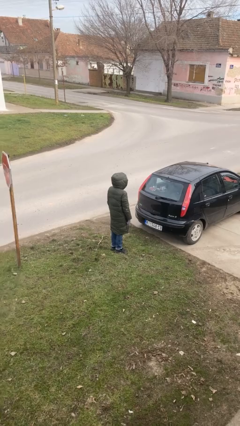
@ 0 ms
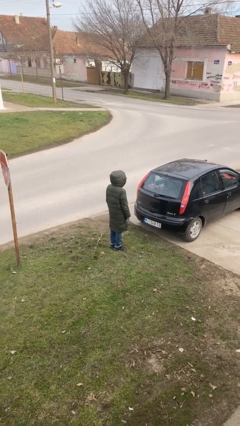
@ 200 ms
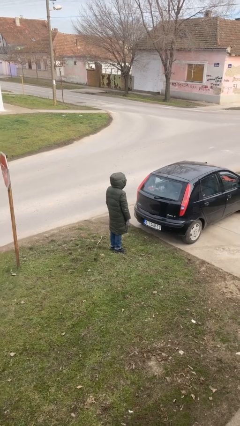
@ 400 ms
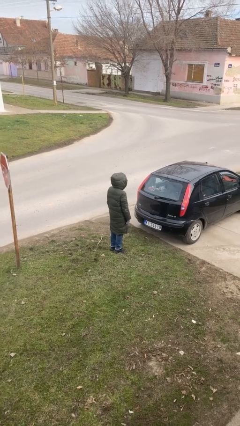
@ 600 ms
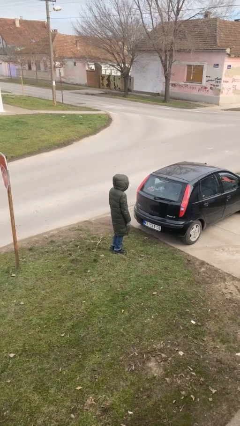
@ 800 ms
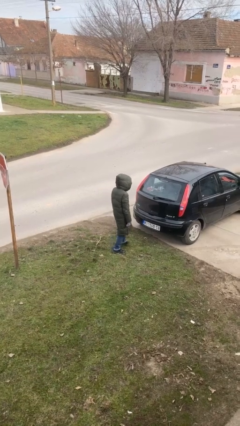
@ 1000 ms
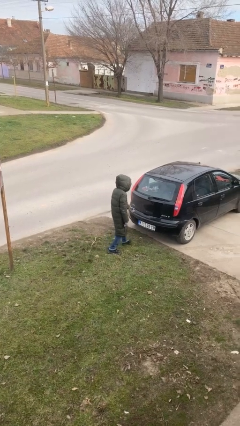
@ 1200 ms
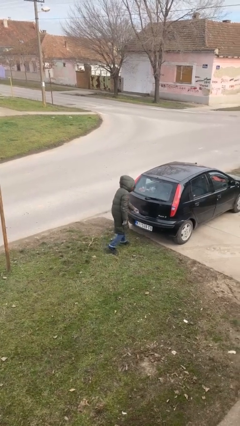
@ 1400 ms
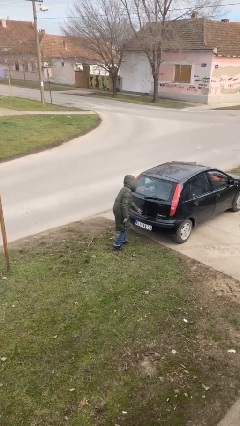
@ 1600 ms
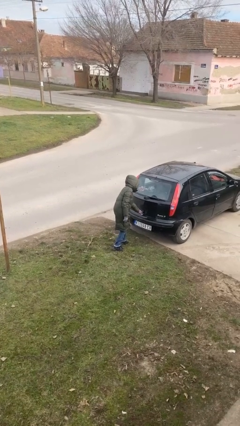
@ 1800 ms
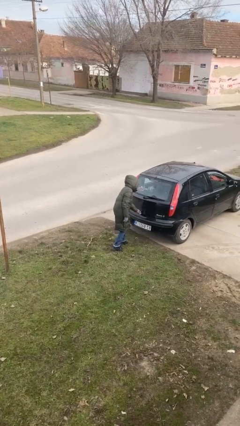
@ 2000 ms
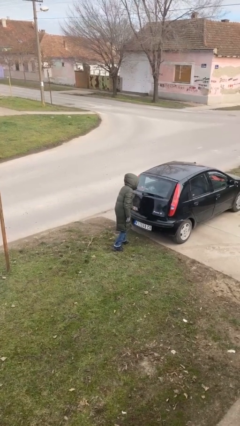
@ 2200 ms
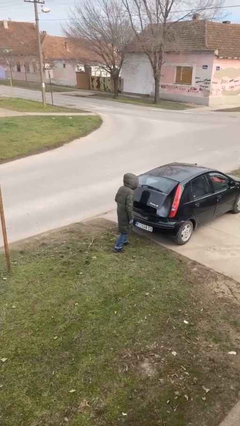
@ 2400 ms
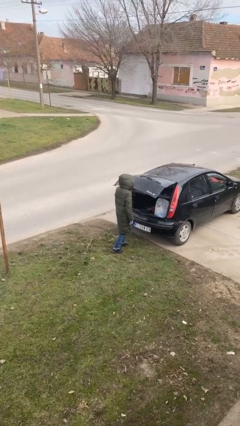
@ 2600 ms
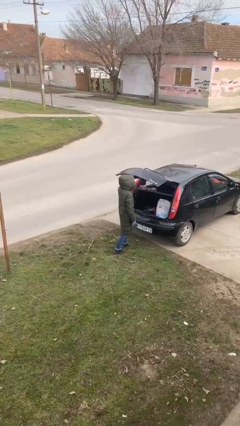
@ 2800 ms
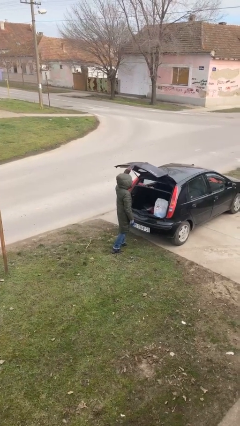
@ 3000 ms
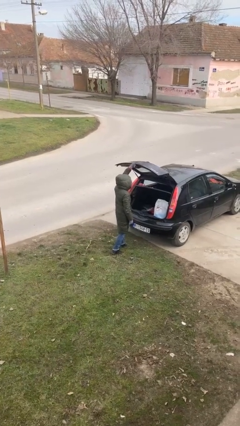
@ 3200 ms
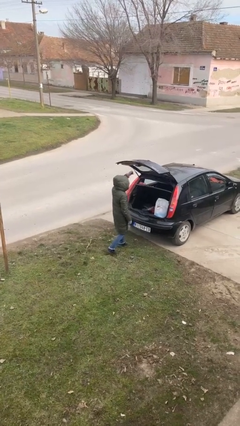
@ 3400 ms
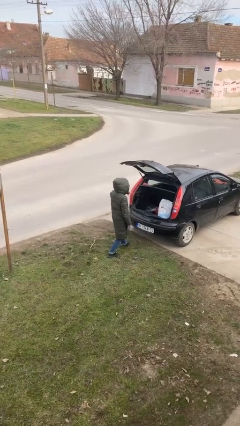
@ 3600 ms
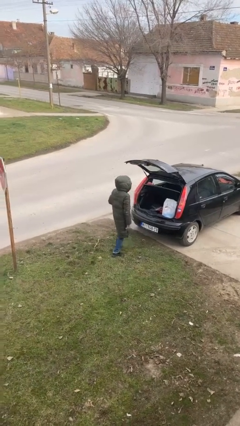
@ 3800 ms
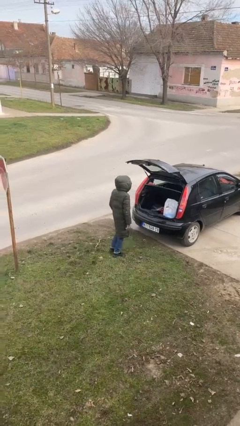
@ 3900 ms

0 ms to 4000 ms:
person opens car trunk

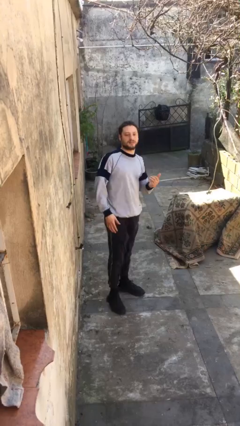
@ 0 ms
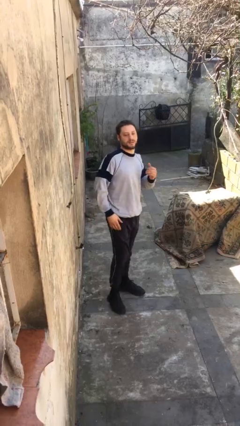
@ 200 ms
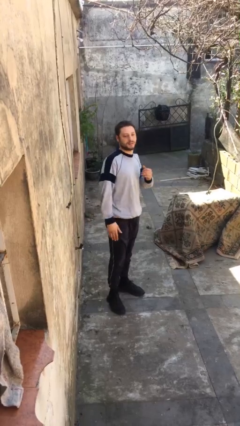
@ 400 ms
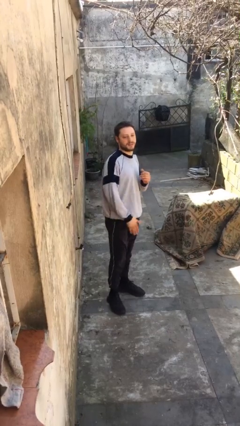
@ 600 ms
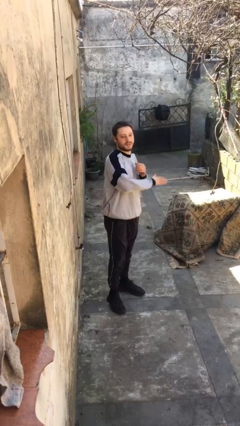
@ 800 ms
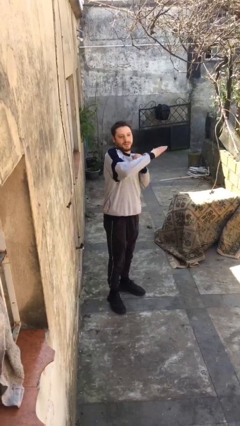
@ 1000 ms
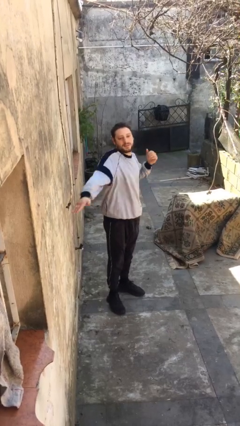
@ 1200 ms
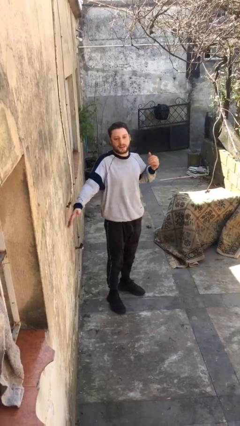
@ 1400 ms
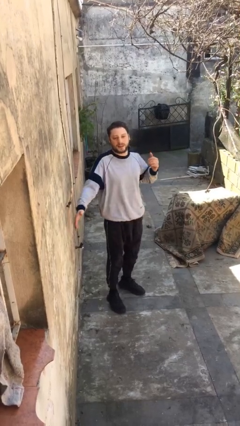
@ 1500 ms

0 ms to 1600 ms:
person karate kicks

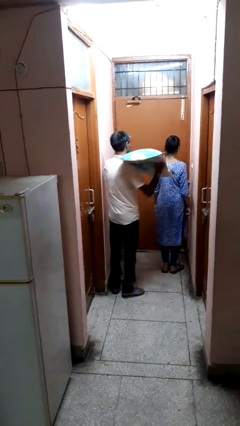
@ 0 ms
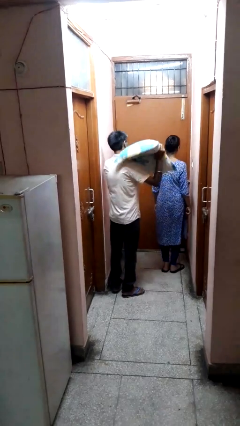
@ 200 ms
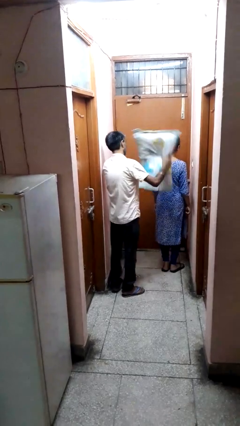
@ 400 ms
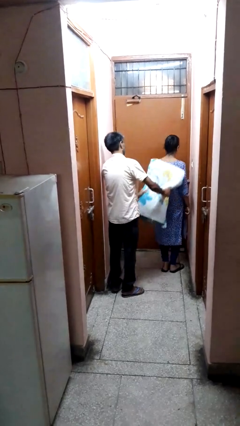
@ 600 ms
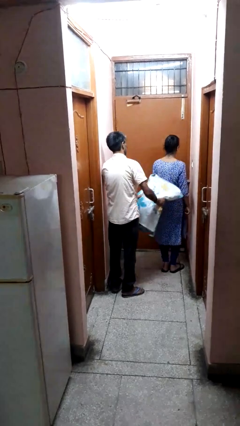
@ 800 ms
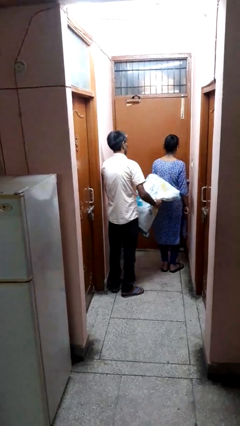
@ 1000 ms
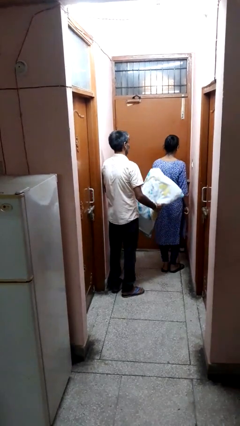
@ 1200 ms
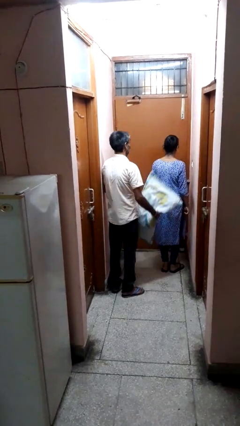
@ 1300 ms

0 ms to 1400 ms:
person hits person with pillow

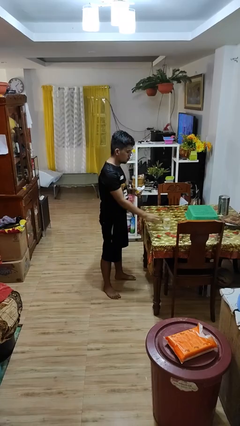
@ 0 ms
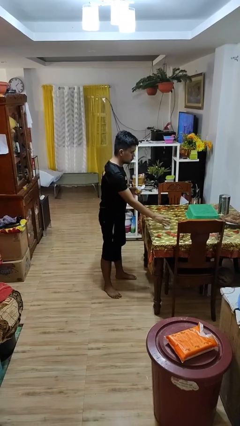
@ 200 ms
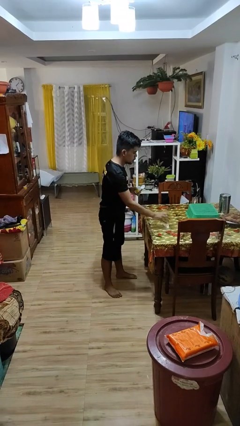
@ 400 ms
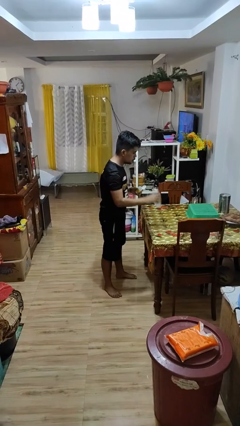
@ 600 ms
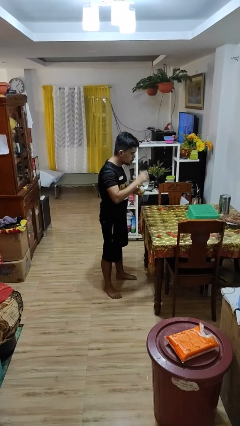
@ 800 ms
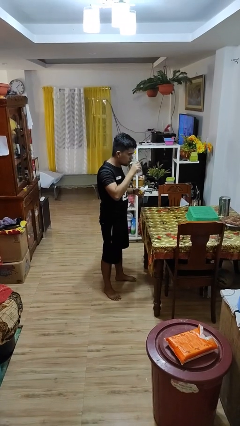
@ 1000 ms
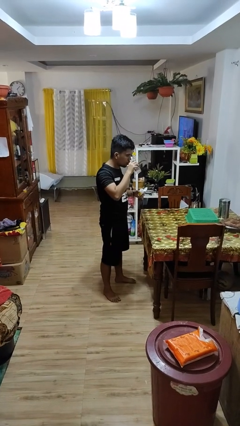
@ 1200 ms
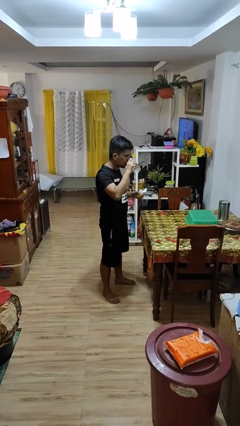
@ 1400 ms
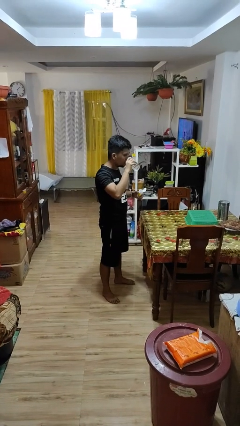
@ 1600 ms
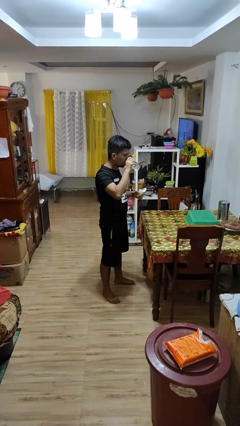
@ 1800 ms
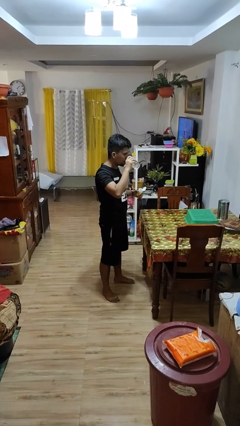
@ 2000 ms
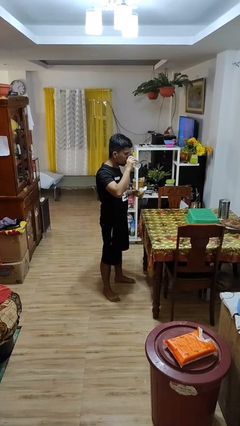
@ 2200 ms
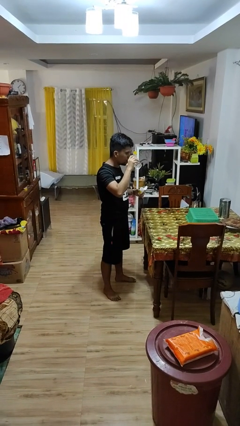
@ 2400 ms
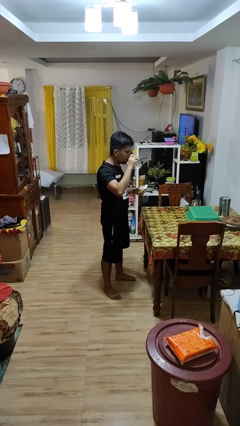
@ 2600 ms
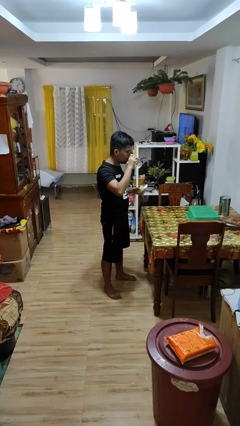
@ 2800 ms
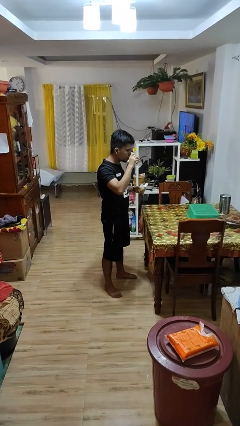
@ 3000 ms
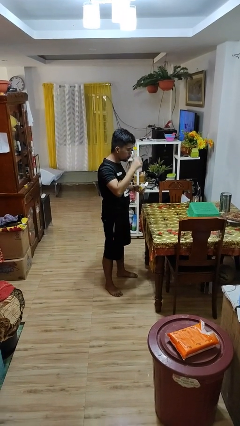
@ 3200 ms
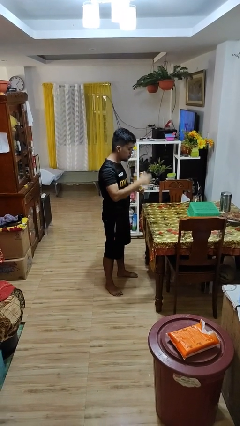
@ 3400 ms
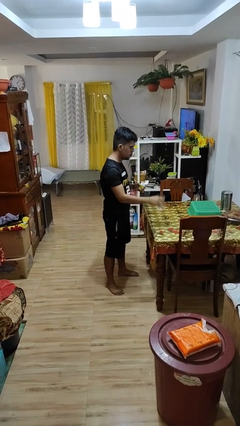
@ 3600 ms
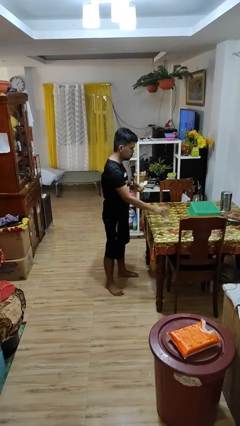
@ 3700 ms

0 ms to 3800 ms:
person drinks from cup

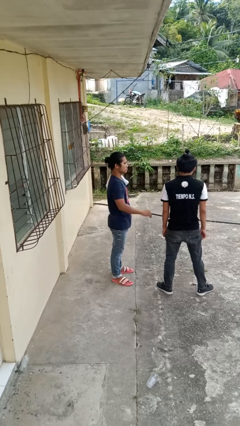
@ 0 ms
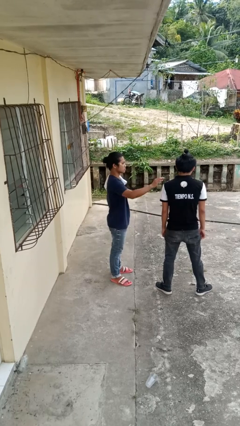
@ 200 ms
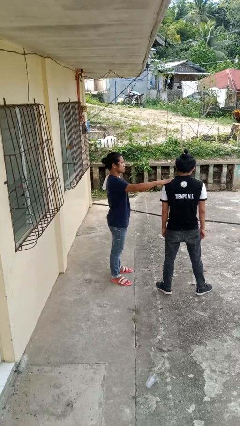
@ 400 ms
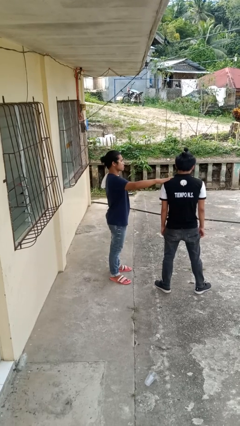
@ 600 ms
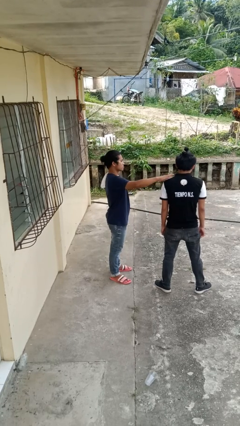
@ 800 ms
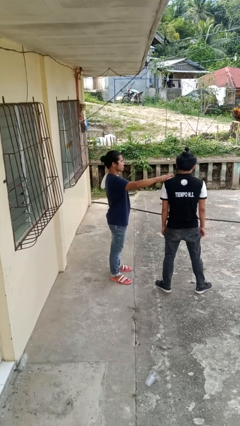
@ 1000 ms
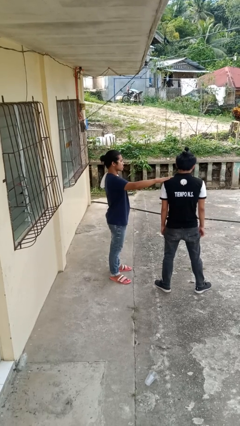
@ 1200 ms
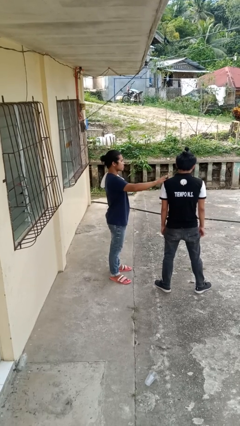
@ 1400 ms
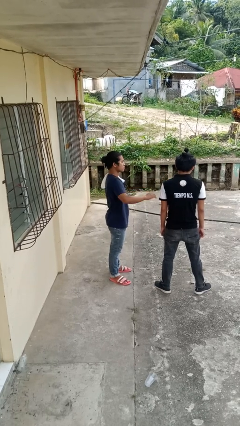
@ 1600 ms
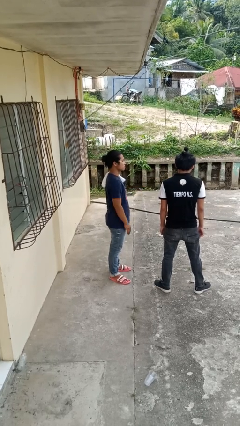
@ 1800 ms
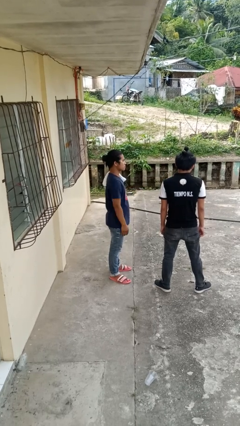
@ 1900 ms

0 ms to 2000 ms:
person pounds shoulders of person

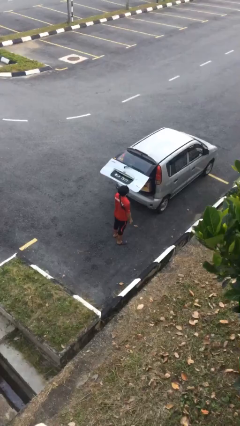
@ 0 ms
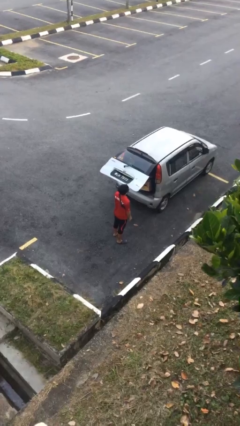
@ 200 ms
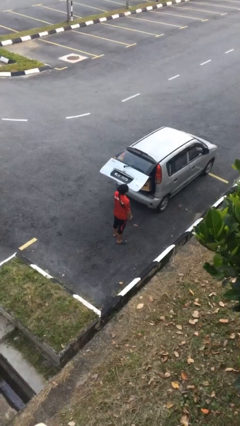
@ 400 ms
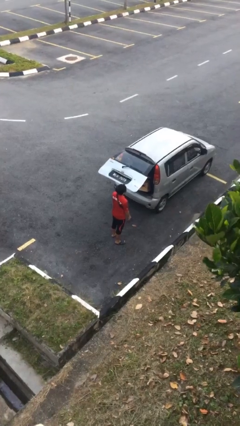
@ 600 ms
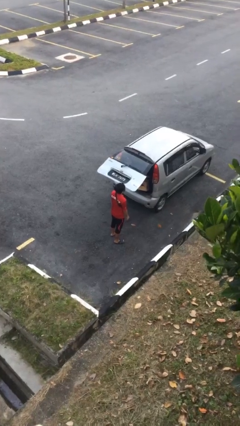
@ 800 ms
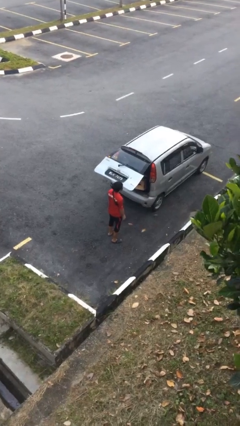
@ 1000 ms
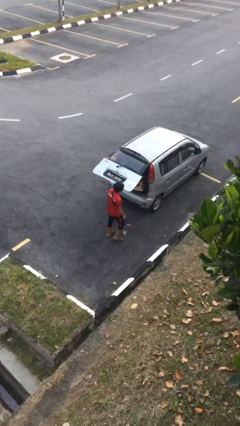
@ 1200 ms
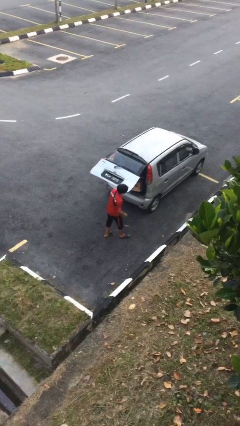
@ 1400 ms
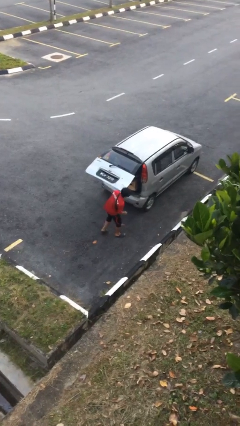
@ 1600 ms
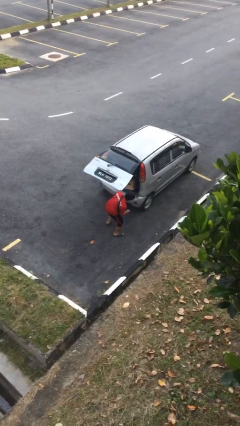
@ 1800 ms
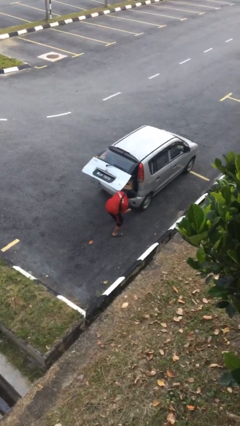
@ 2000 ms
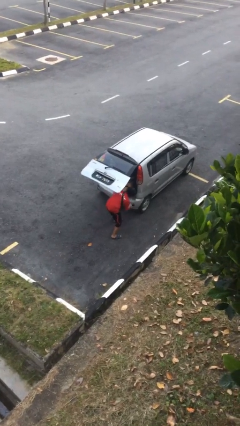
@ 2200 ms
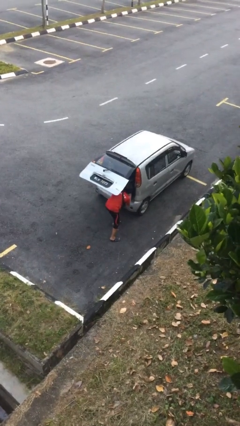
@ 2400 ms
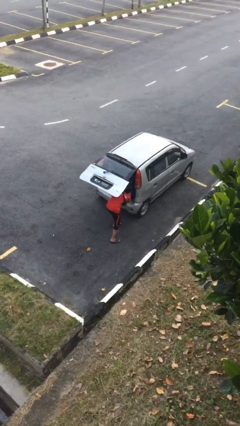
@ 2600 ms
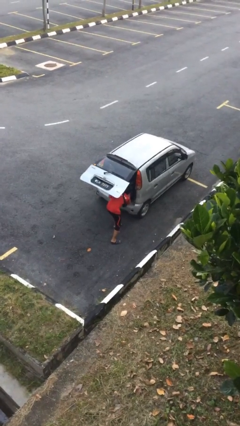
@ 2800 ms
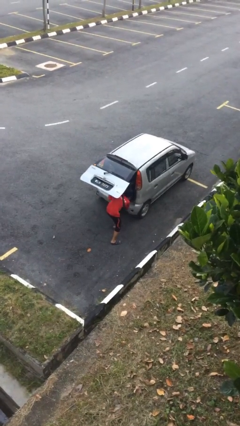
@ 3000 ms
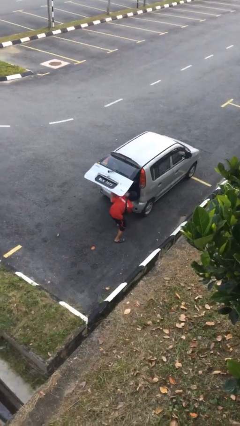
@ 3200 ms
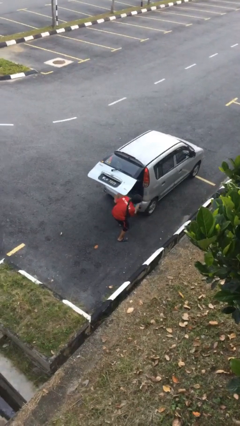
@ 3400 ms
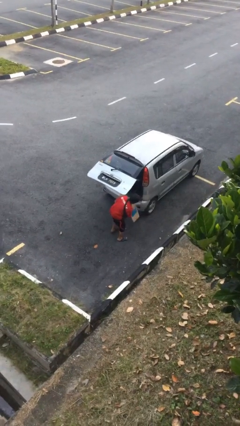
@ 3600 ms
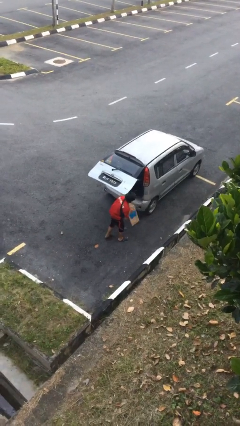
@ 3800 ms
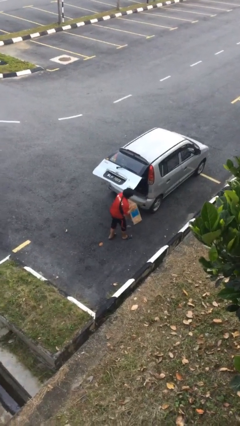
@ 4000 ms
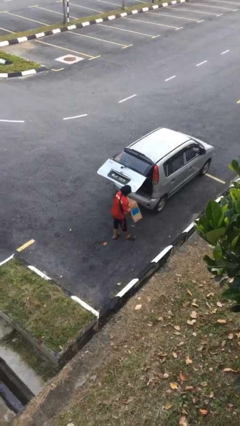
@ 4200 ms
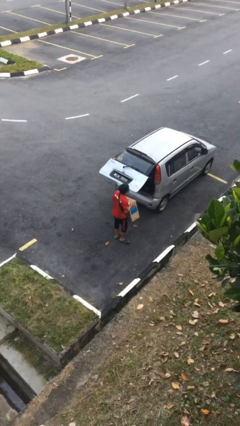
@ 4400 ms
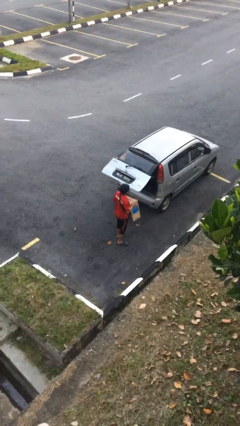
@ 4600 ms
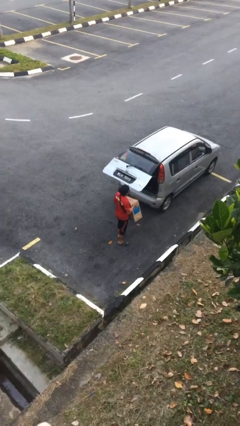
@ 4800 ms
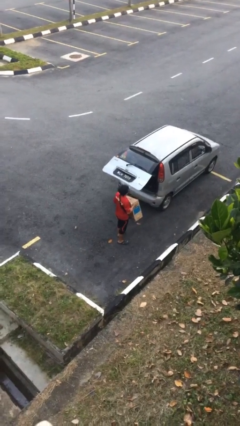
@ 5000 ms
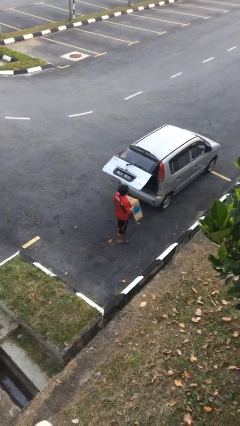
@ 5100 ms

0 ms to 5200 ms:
person unloads car
